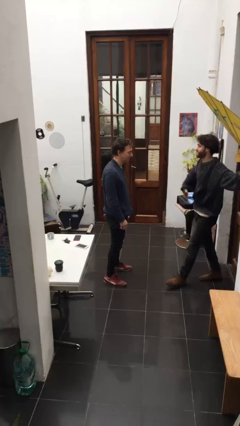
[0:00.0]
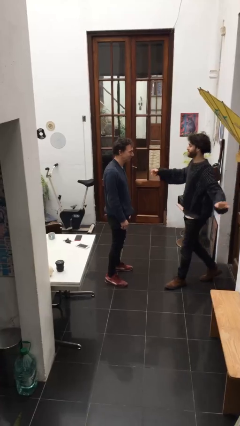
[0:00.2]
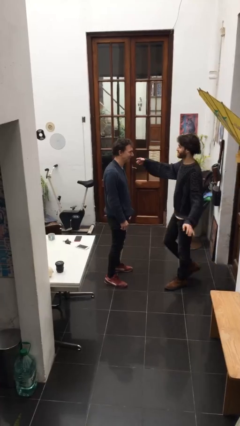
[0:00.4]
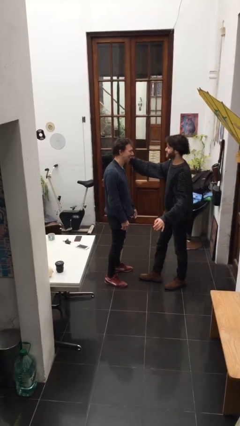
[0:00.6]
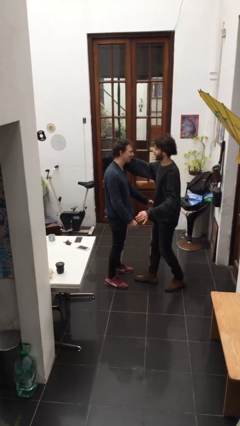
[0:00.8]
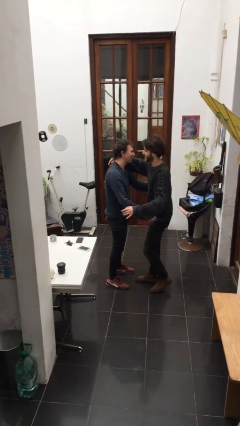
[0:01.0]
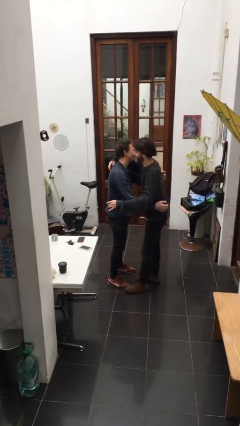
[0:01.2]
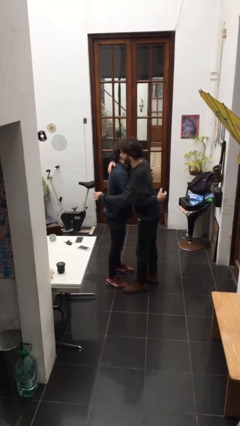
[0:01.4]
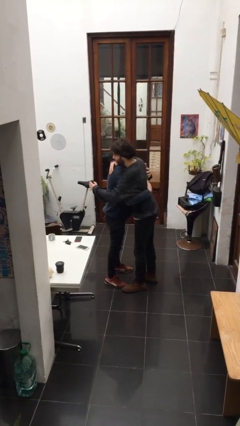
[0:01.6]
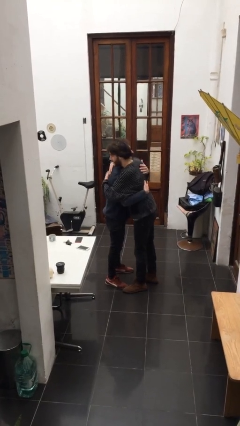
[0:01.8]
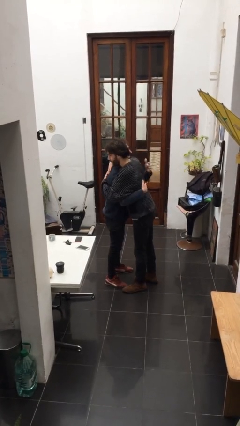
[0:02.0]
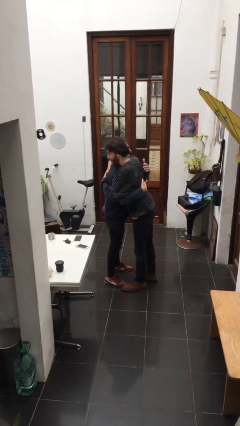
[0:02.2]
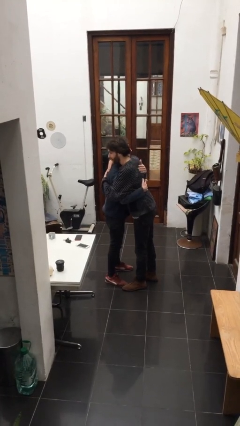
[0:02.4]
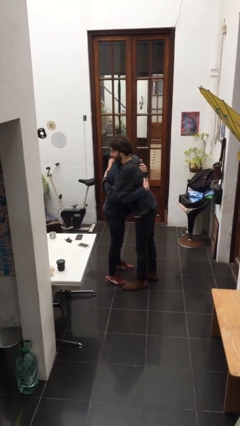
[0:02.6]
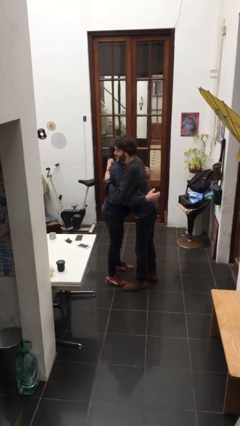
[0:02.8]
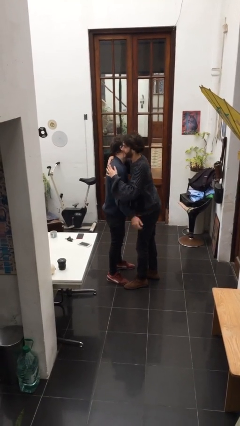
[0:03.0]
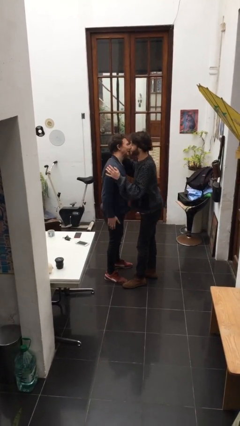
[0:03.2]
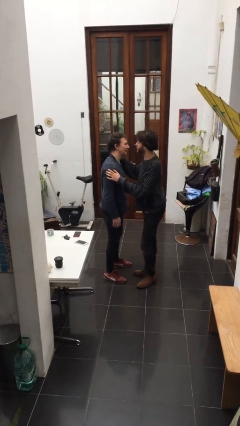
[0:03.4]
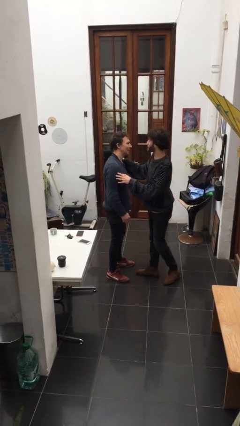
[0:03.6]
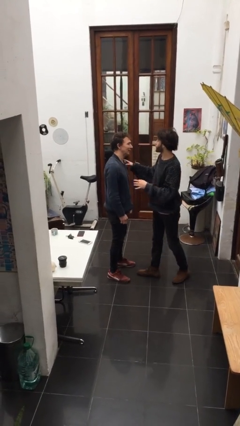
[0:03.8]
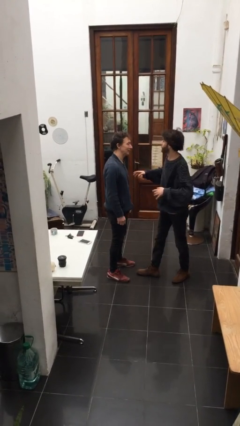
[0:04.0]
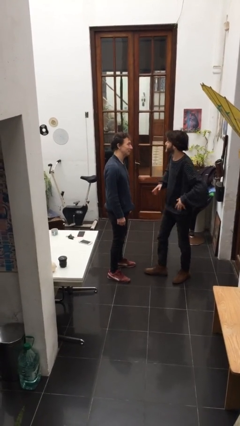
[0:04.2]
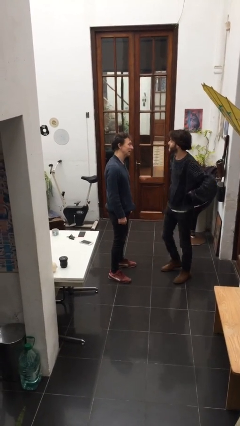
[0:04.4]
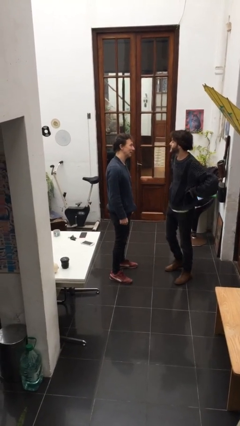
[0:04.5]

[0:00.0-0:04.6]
person embraces person

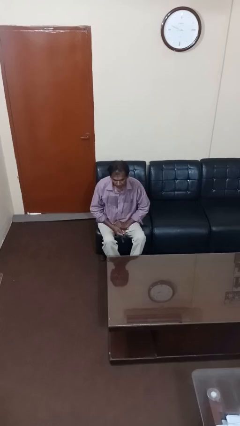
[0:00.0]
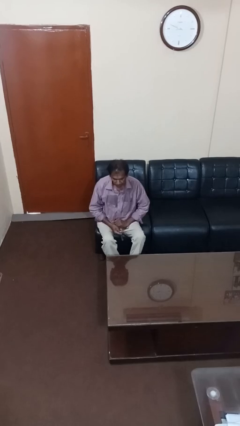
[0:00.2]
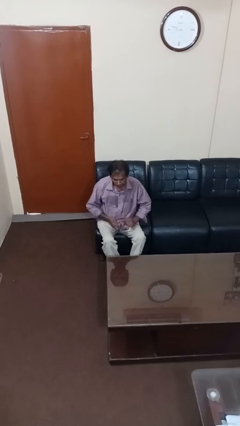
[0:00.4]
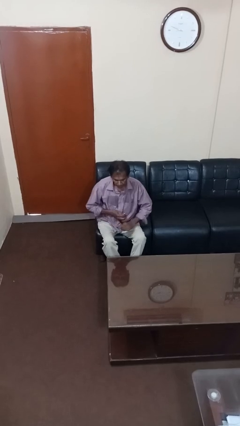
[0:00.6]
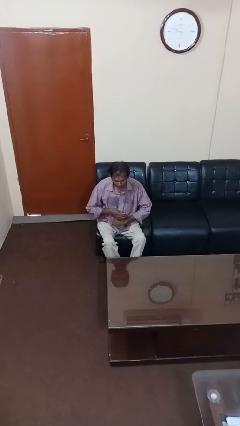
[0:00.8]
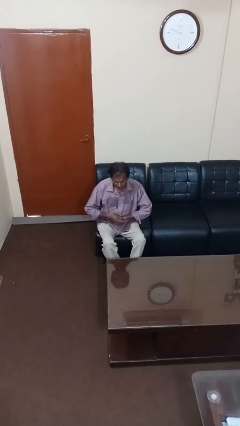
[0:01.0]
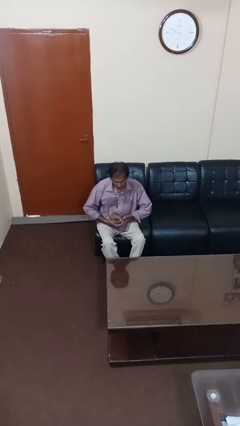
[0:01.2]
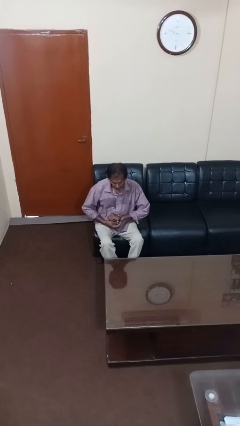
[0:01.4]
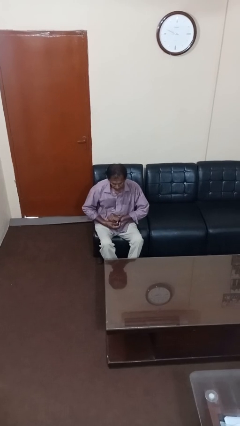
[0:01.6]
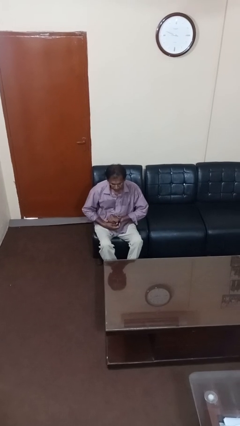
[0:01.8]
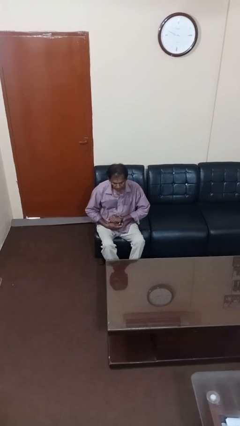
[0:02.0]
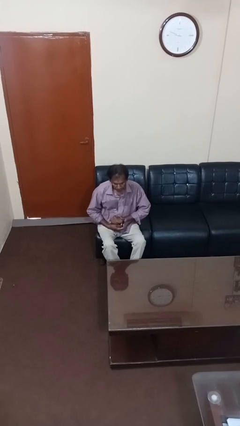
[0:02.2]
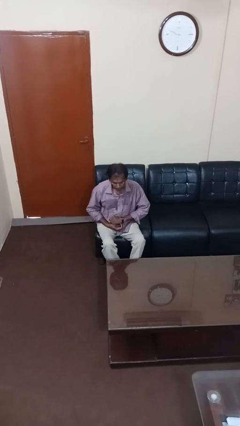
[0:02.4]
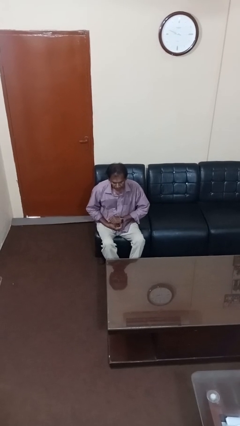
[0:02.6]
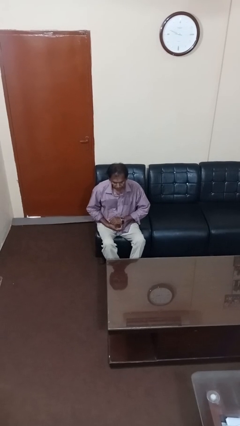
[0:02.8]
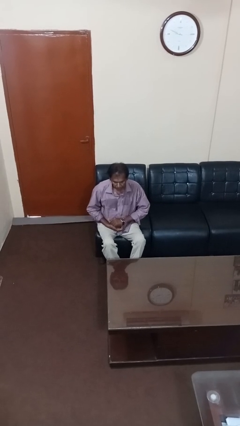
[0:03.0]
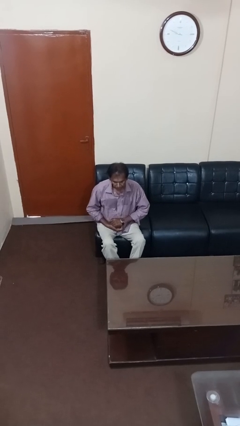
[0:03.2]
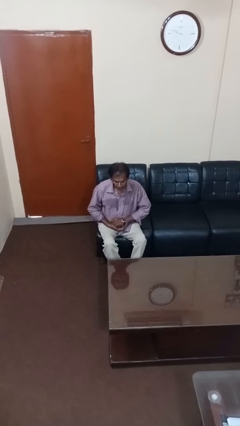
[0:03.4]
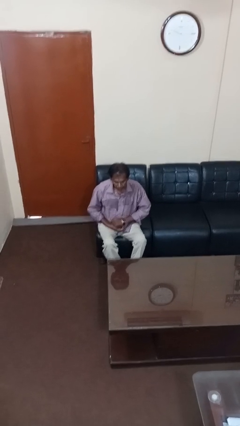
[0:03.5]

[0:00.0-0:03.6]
person puts on wristwatch

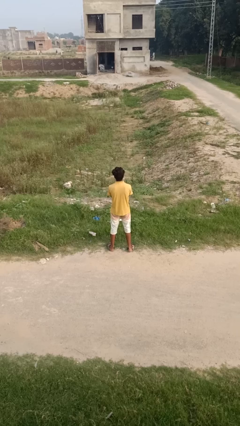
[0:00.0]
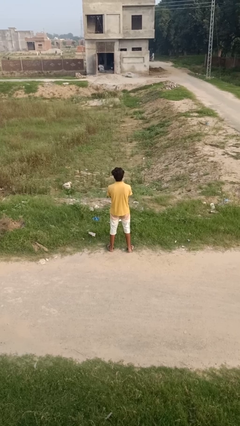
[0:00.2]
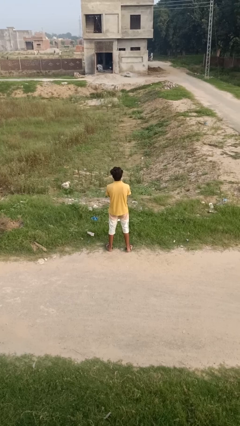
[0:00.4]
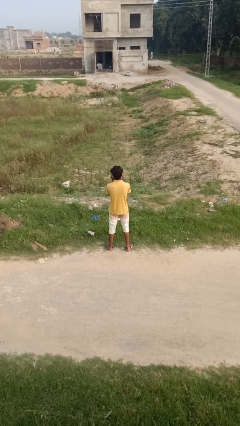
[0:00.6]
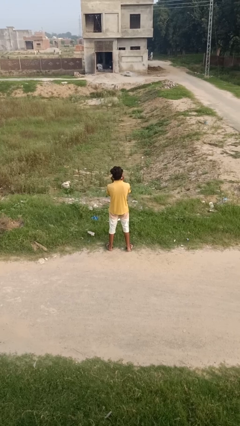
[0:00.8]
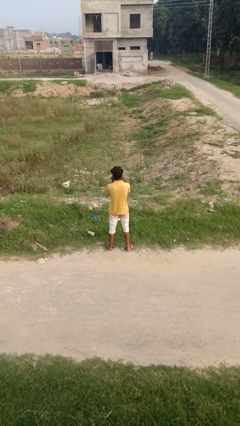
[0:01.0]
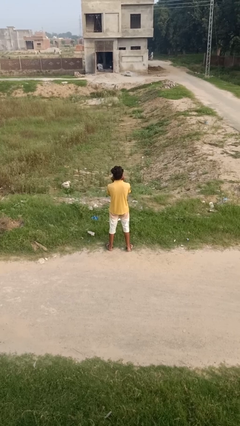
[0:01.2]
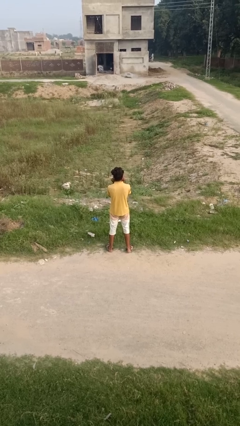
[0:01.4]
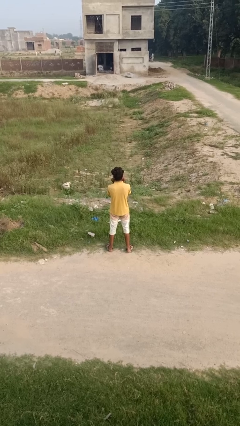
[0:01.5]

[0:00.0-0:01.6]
person touches earlobe

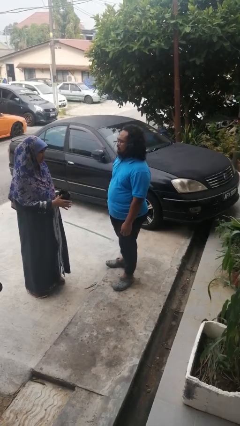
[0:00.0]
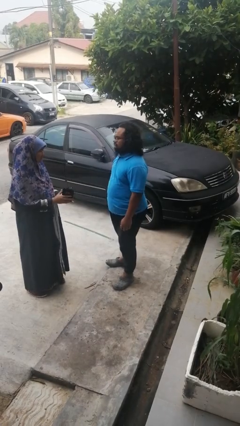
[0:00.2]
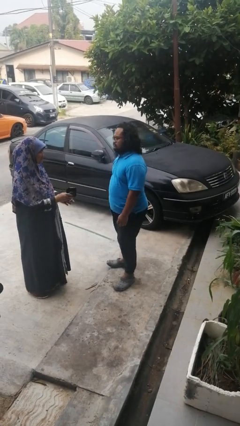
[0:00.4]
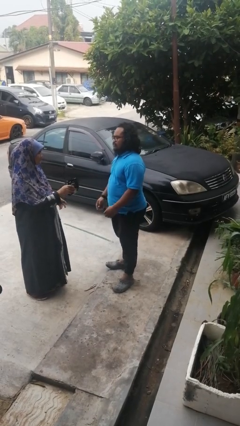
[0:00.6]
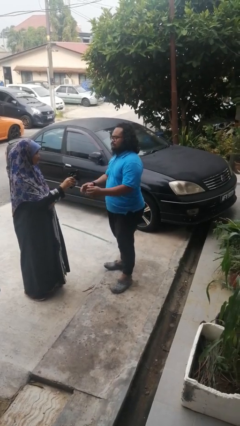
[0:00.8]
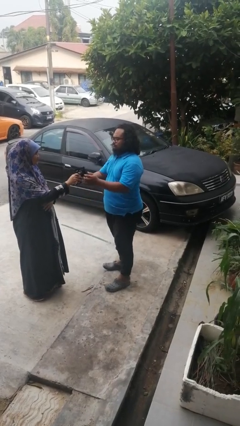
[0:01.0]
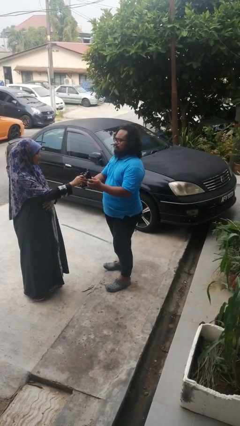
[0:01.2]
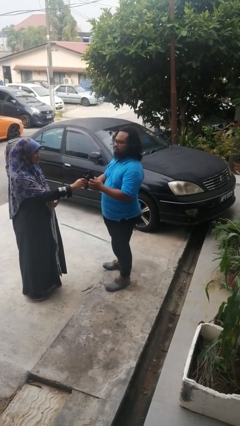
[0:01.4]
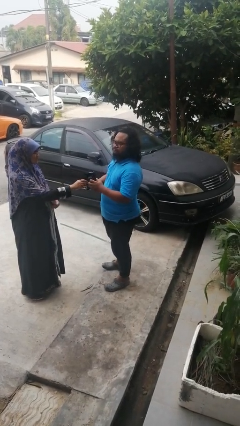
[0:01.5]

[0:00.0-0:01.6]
person transfers object to person

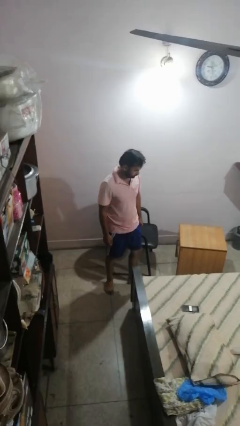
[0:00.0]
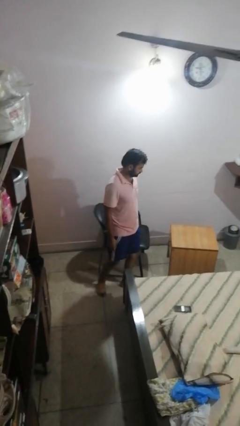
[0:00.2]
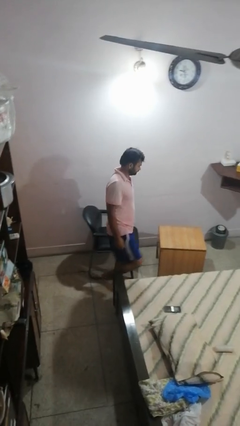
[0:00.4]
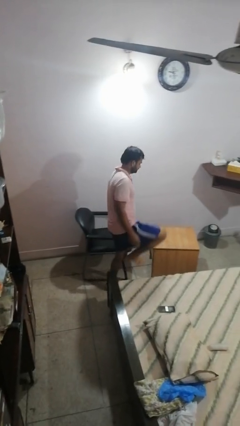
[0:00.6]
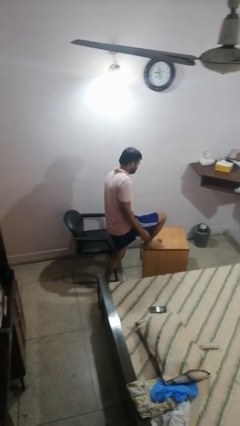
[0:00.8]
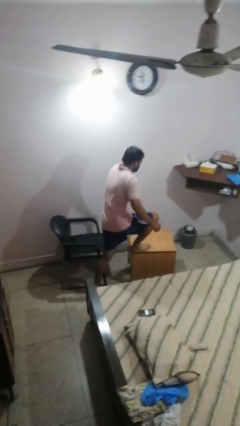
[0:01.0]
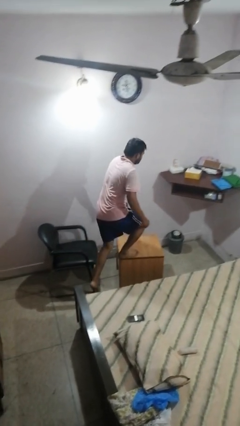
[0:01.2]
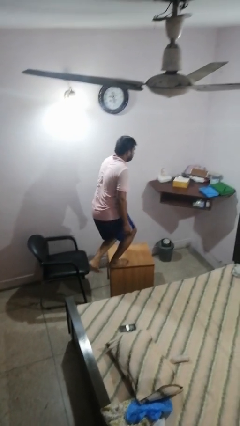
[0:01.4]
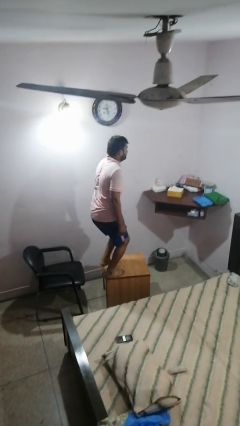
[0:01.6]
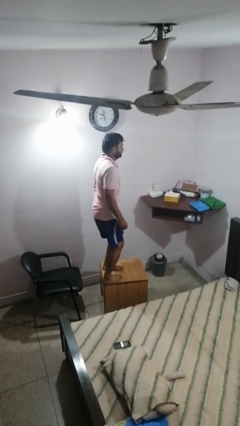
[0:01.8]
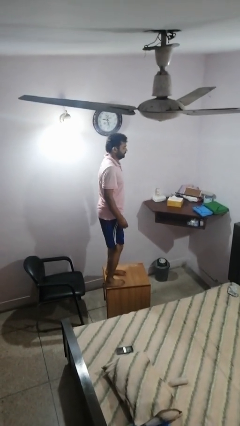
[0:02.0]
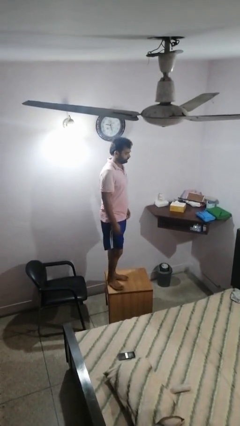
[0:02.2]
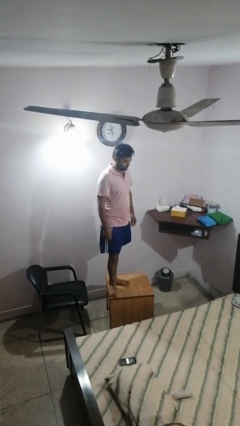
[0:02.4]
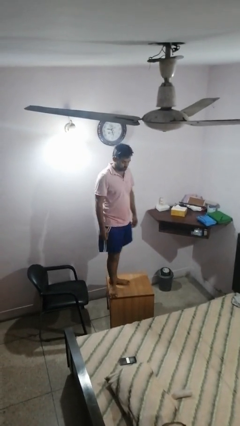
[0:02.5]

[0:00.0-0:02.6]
person climbs on table

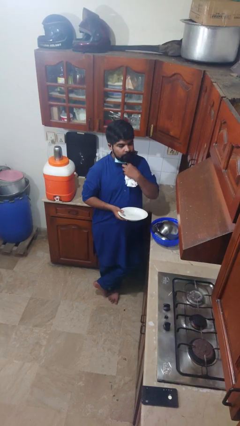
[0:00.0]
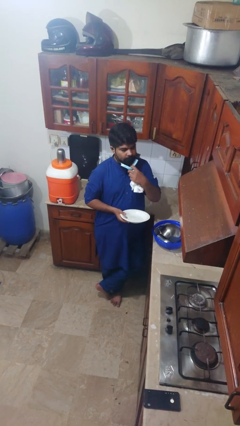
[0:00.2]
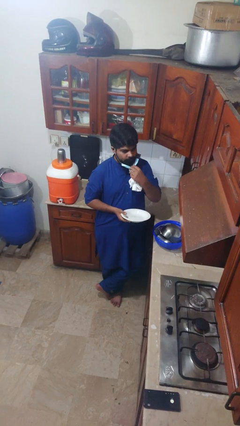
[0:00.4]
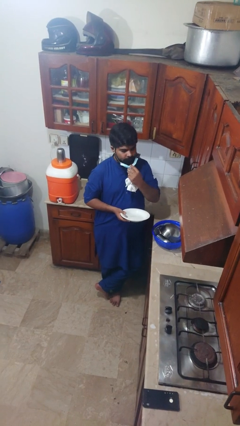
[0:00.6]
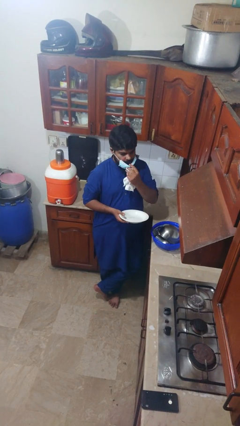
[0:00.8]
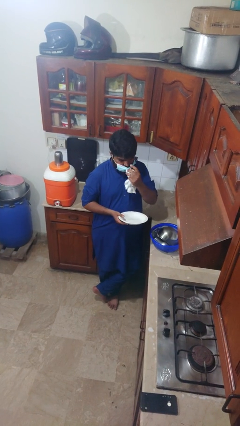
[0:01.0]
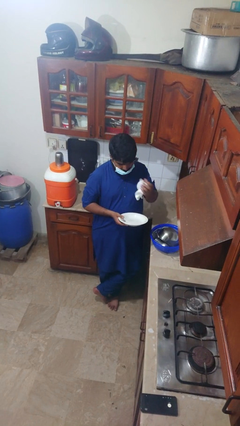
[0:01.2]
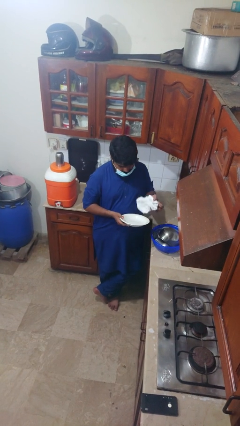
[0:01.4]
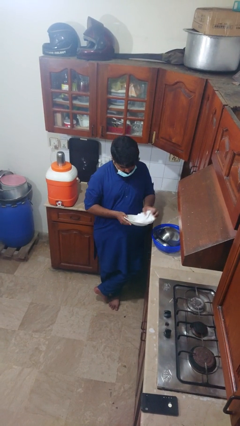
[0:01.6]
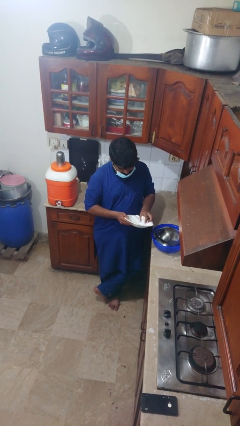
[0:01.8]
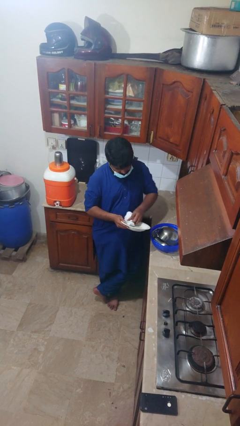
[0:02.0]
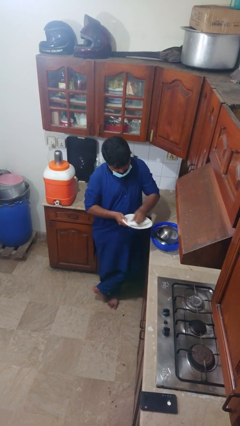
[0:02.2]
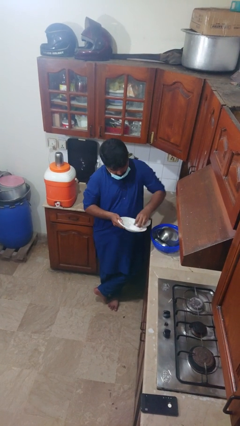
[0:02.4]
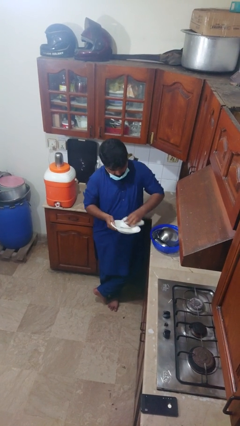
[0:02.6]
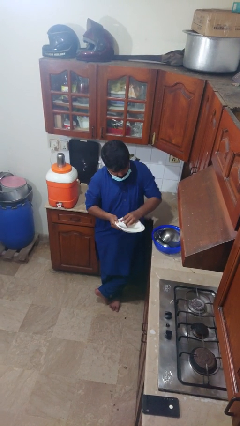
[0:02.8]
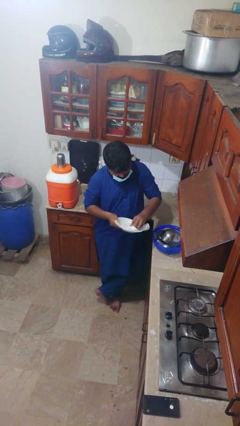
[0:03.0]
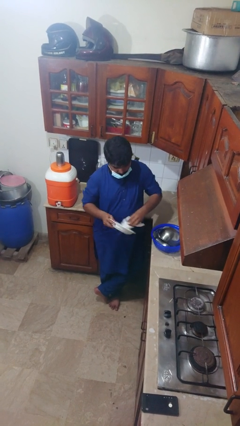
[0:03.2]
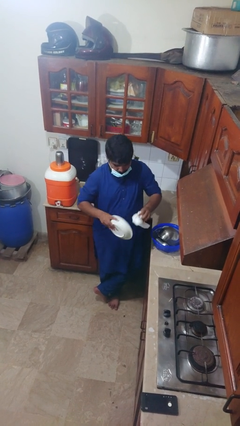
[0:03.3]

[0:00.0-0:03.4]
person dries dish

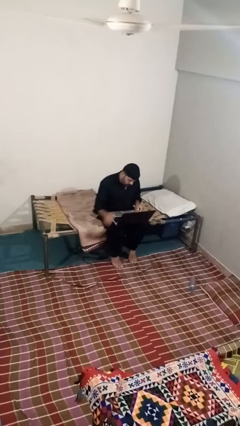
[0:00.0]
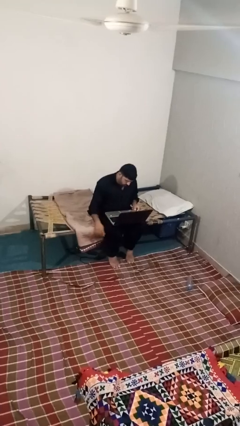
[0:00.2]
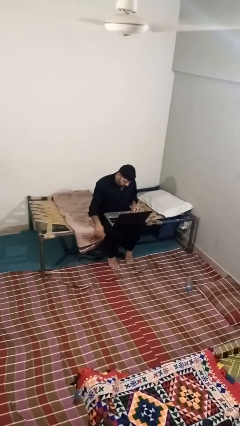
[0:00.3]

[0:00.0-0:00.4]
person closes laptop
